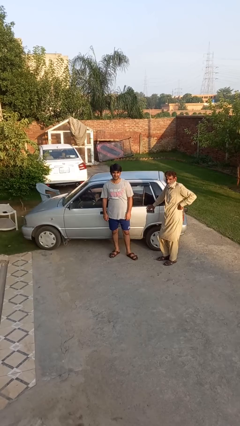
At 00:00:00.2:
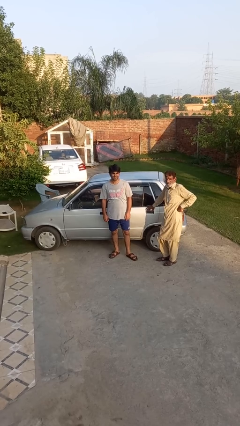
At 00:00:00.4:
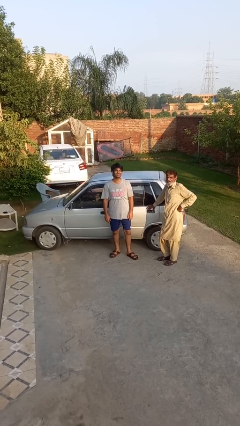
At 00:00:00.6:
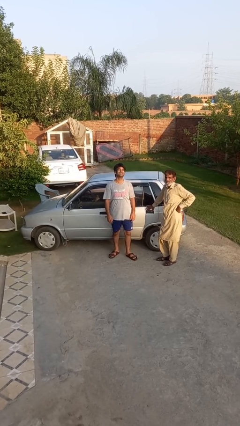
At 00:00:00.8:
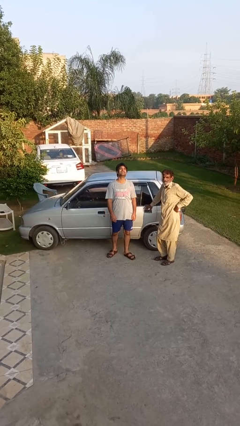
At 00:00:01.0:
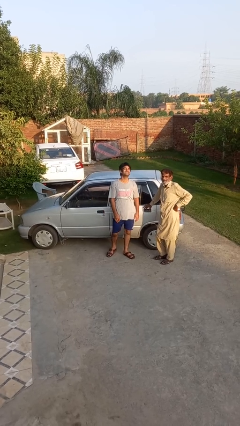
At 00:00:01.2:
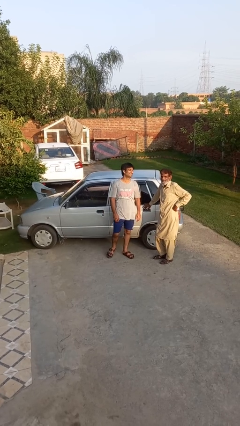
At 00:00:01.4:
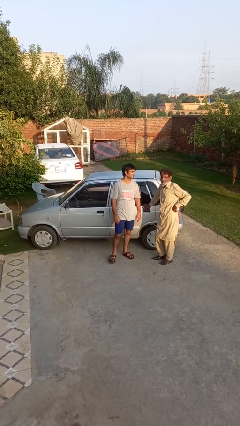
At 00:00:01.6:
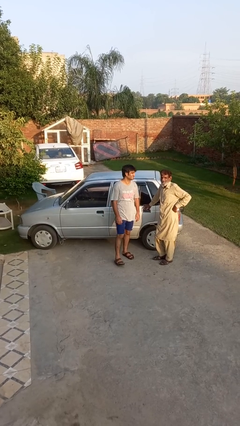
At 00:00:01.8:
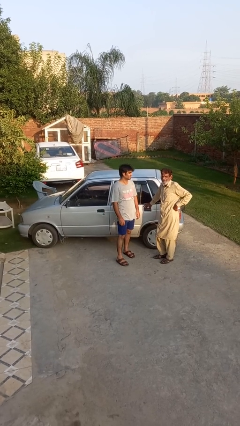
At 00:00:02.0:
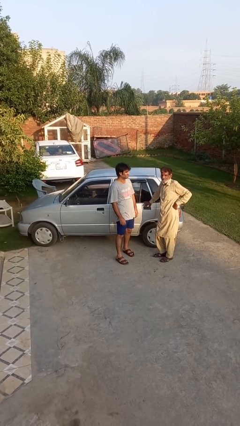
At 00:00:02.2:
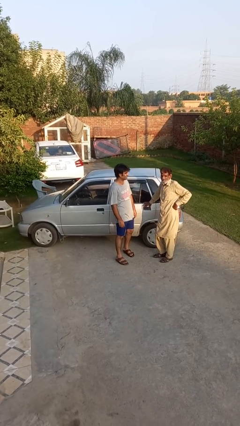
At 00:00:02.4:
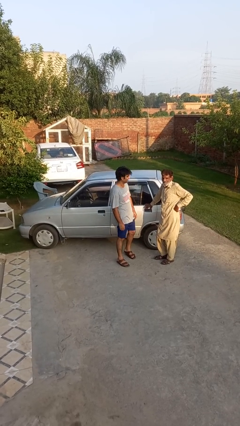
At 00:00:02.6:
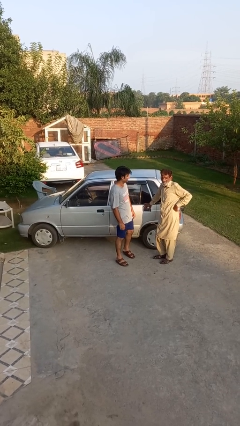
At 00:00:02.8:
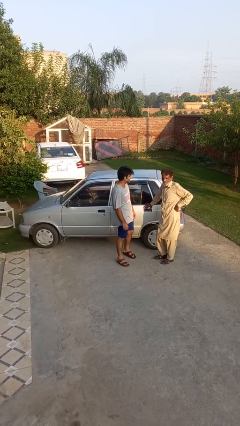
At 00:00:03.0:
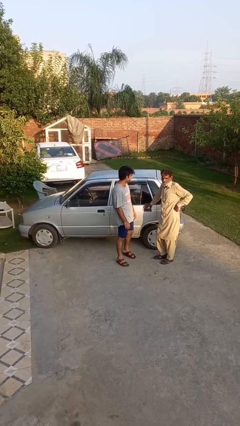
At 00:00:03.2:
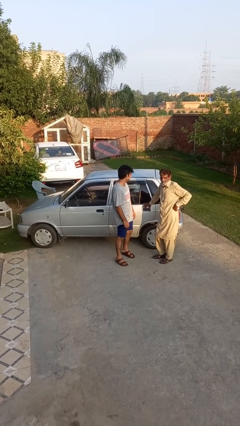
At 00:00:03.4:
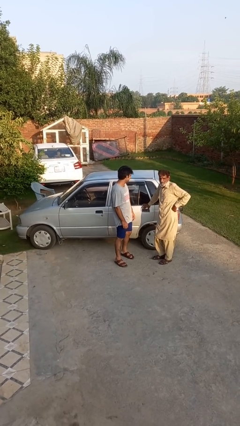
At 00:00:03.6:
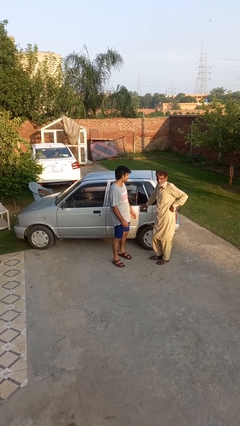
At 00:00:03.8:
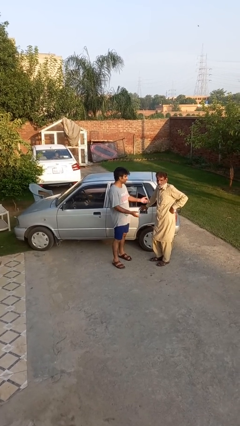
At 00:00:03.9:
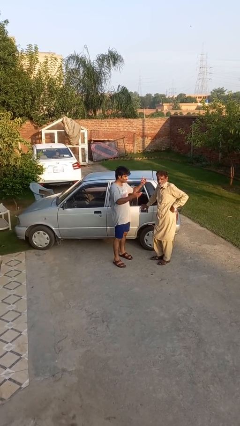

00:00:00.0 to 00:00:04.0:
person laughs with person

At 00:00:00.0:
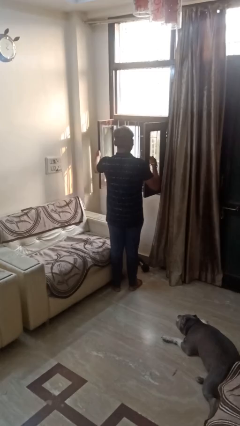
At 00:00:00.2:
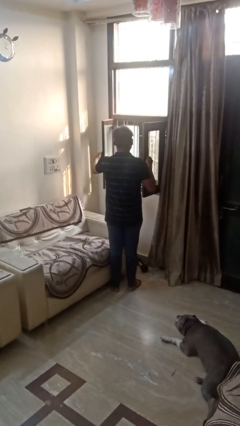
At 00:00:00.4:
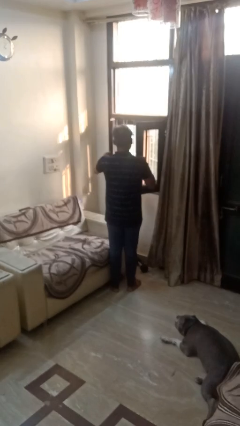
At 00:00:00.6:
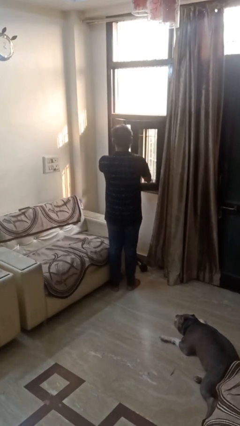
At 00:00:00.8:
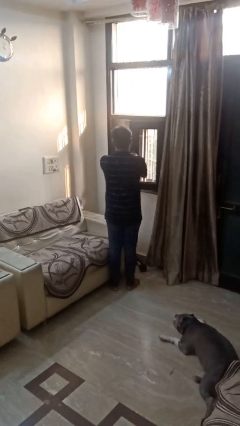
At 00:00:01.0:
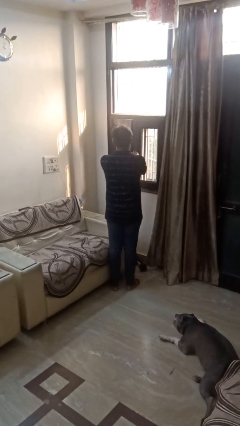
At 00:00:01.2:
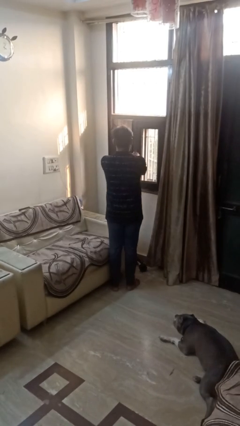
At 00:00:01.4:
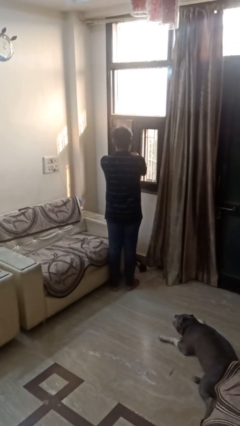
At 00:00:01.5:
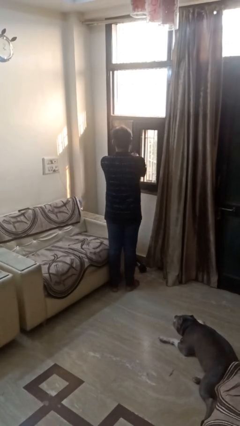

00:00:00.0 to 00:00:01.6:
person closes home window

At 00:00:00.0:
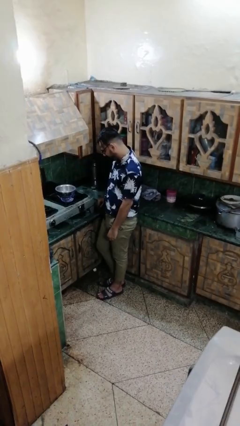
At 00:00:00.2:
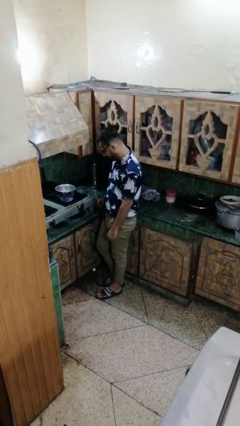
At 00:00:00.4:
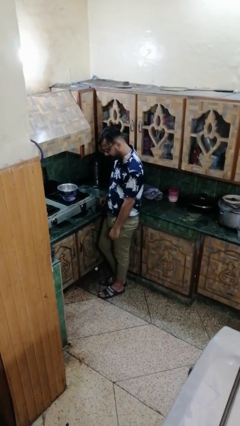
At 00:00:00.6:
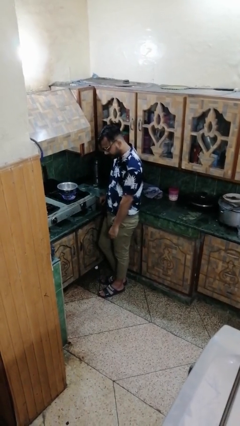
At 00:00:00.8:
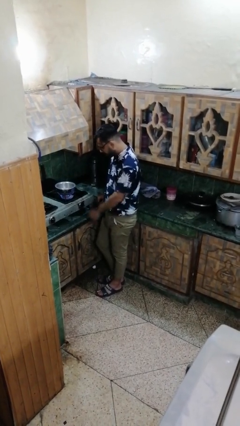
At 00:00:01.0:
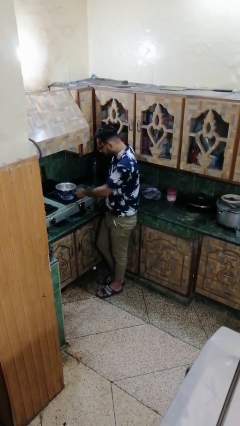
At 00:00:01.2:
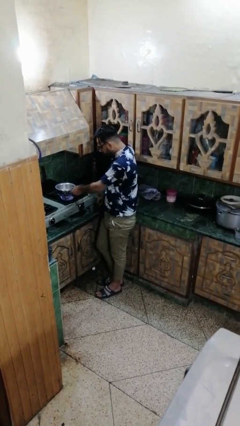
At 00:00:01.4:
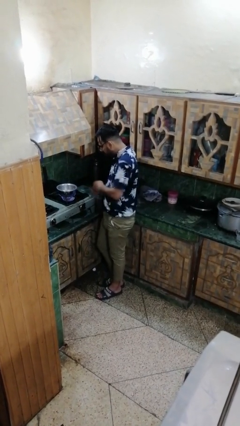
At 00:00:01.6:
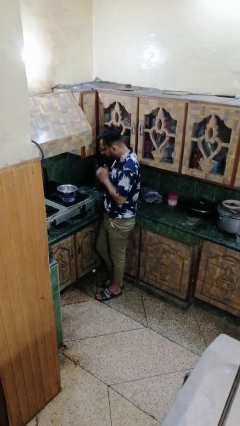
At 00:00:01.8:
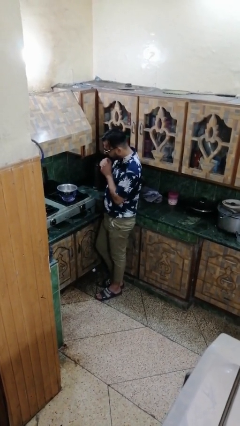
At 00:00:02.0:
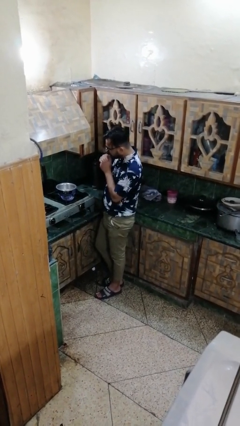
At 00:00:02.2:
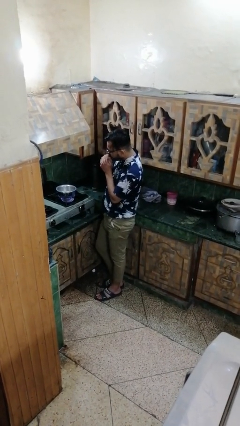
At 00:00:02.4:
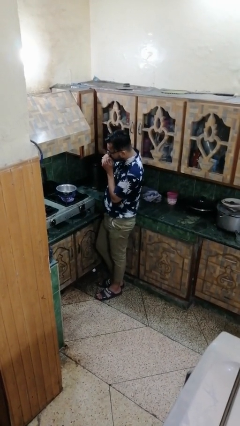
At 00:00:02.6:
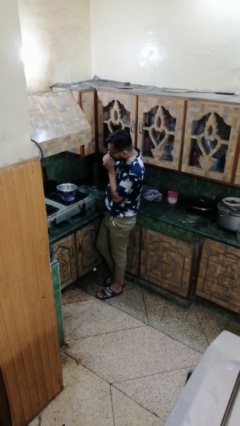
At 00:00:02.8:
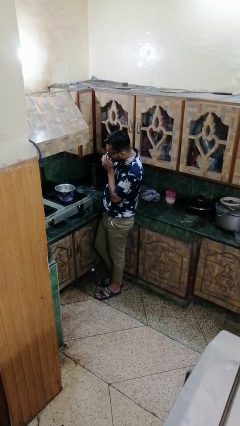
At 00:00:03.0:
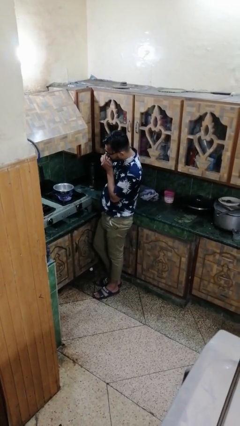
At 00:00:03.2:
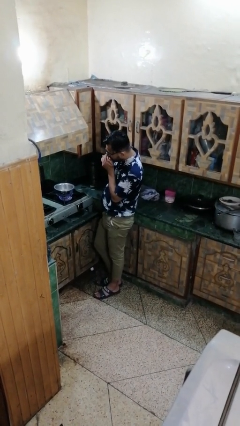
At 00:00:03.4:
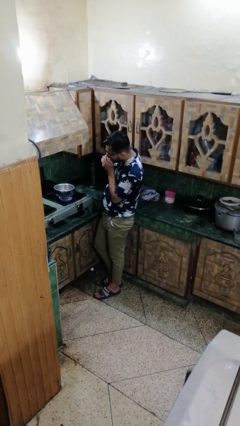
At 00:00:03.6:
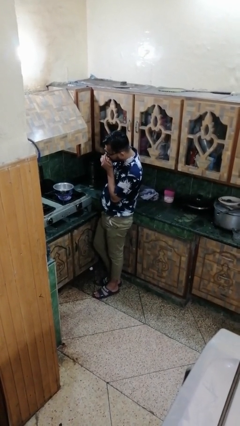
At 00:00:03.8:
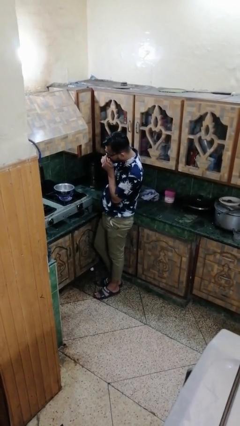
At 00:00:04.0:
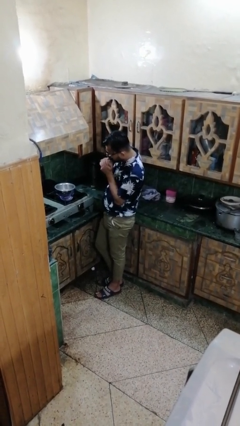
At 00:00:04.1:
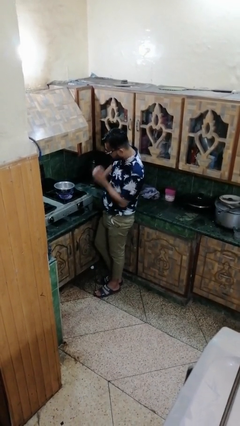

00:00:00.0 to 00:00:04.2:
person burns hand

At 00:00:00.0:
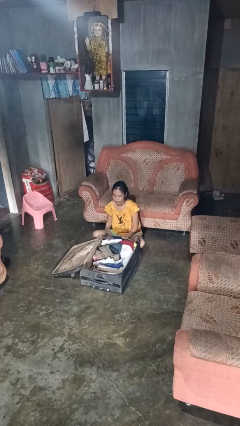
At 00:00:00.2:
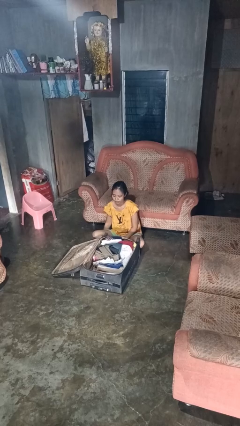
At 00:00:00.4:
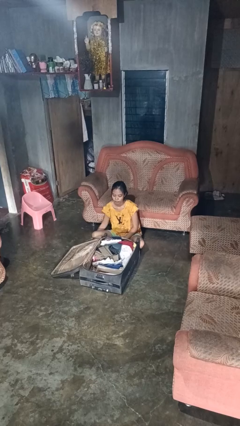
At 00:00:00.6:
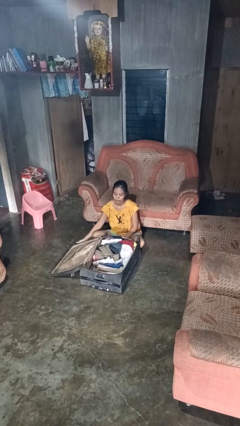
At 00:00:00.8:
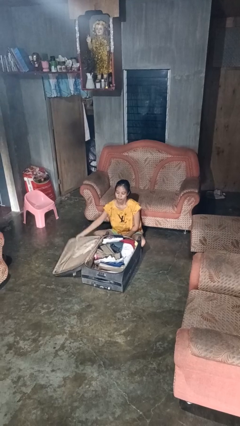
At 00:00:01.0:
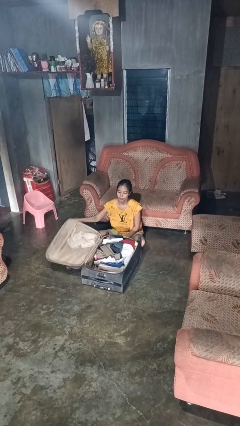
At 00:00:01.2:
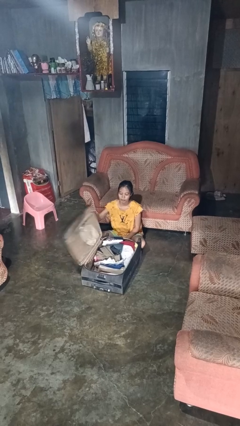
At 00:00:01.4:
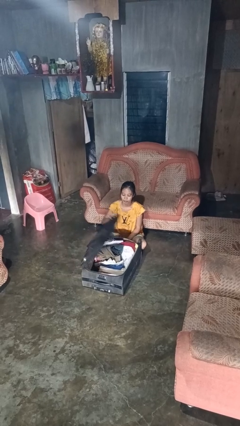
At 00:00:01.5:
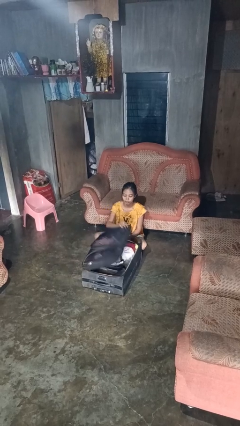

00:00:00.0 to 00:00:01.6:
person closes suitcase

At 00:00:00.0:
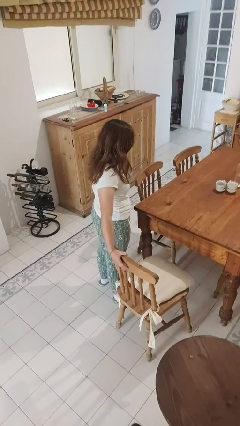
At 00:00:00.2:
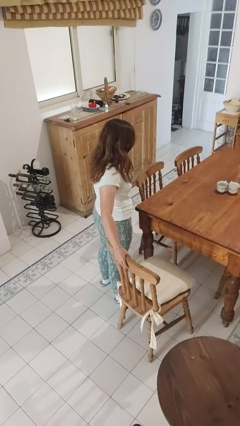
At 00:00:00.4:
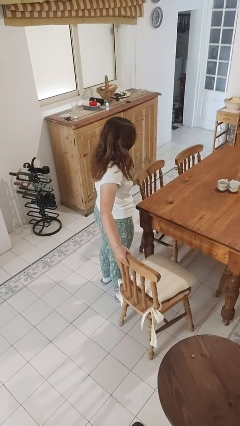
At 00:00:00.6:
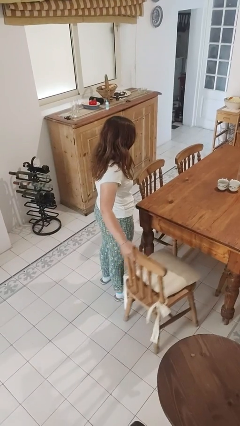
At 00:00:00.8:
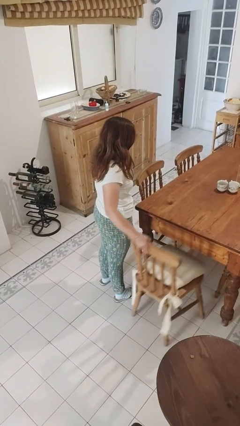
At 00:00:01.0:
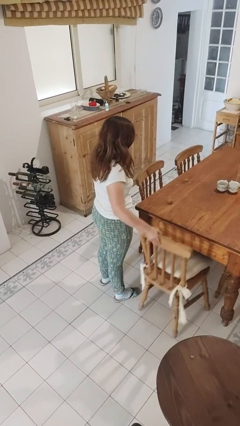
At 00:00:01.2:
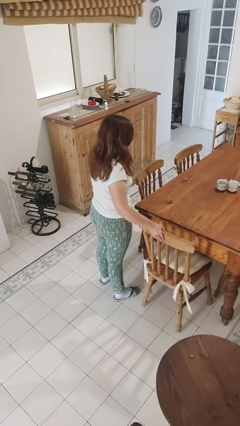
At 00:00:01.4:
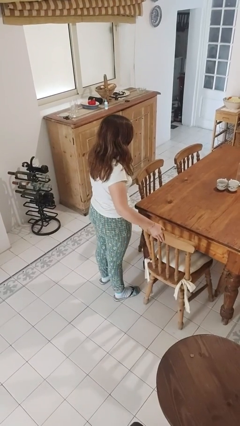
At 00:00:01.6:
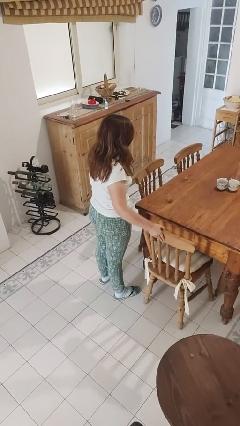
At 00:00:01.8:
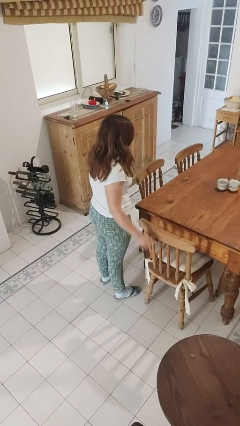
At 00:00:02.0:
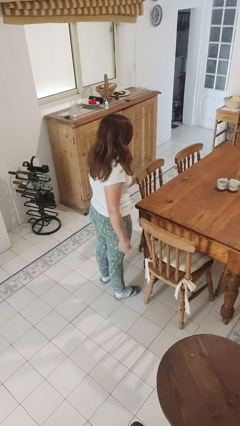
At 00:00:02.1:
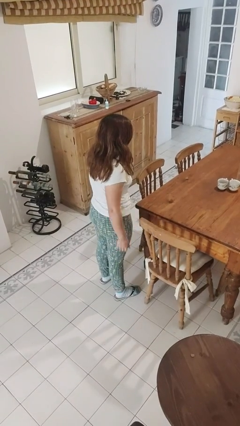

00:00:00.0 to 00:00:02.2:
person pushes in chair

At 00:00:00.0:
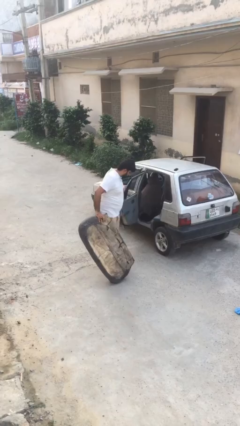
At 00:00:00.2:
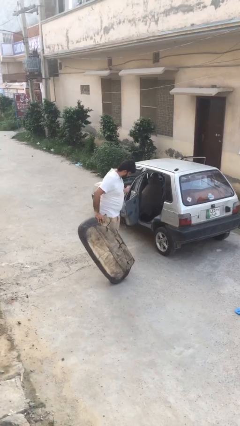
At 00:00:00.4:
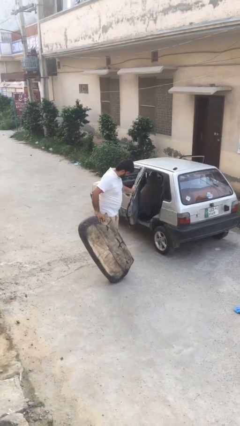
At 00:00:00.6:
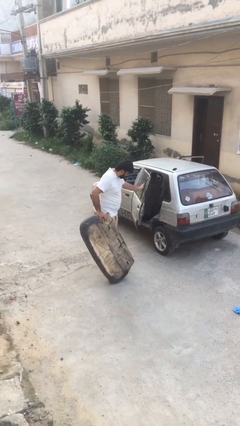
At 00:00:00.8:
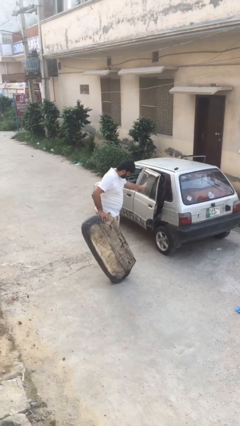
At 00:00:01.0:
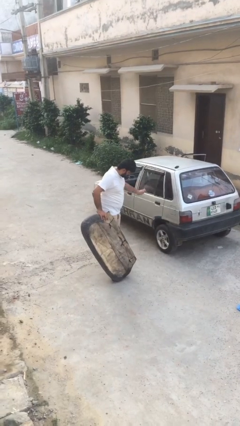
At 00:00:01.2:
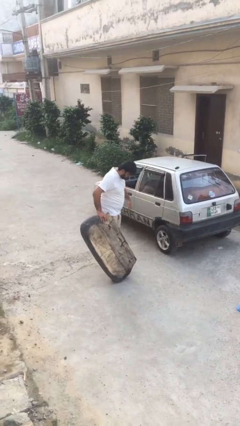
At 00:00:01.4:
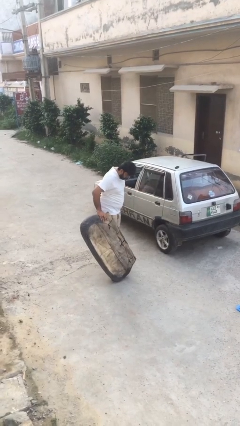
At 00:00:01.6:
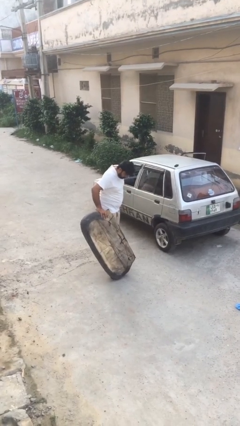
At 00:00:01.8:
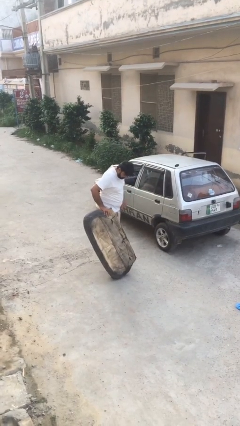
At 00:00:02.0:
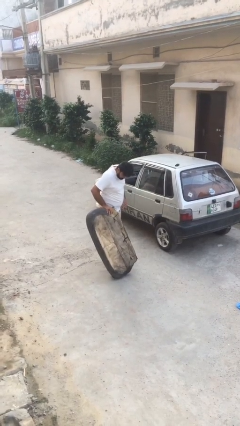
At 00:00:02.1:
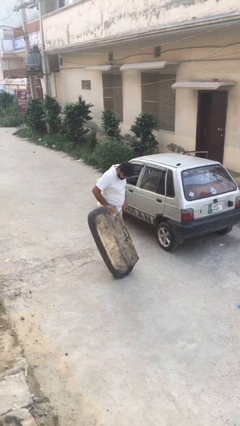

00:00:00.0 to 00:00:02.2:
person closes car door

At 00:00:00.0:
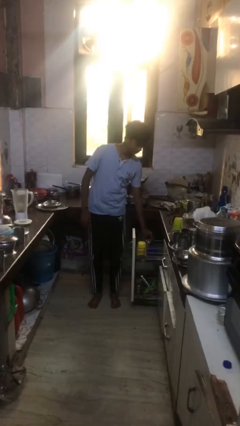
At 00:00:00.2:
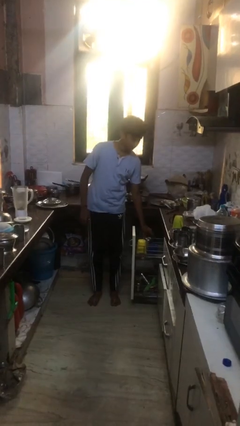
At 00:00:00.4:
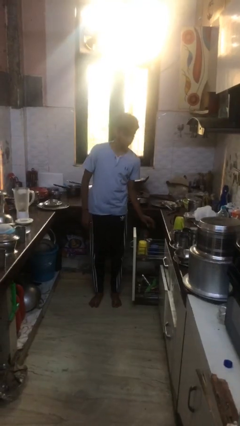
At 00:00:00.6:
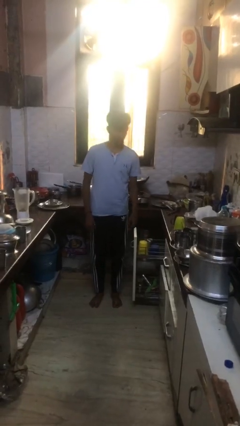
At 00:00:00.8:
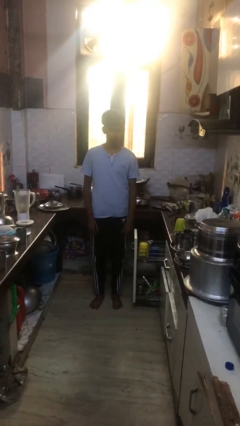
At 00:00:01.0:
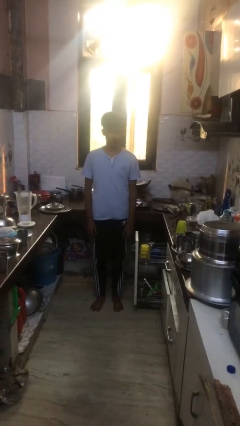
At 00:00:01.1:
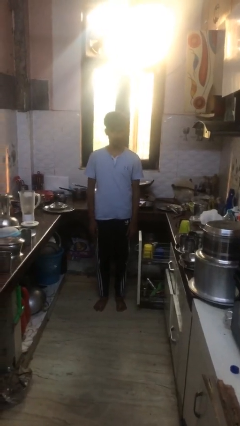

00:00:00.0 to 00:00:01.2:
person loads dishwasher
